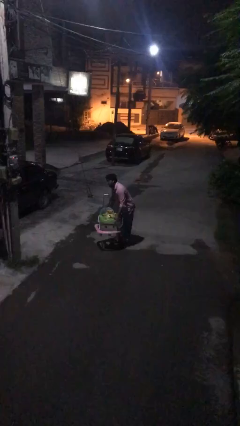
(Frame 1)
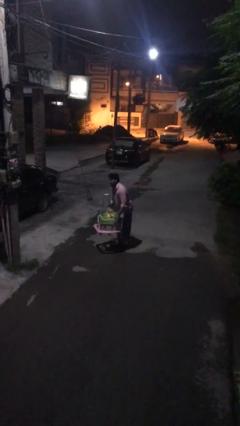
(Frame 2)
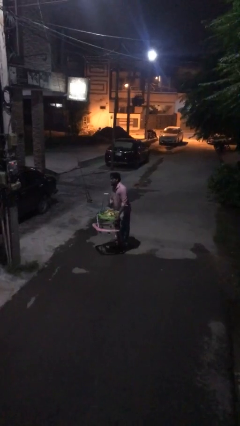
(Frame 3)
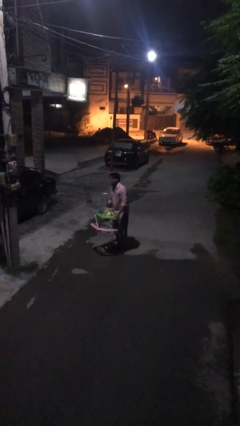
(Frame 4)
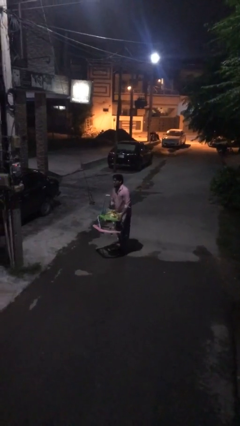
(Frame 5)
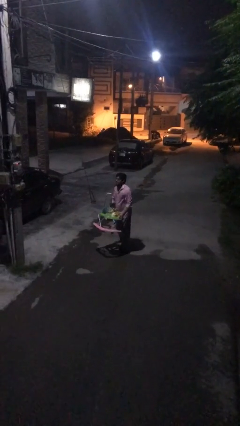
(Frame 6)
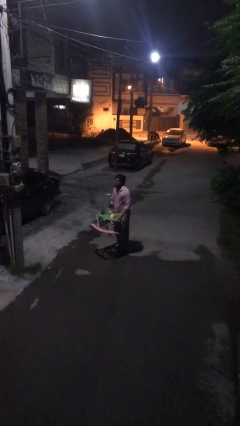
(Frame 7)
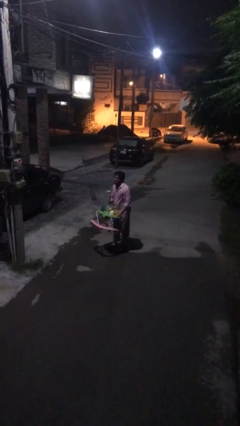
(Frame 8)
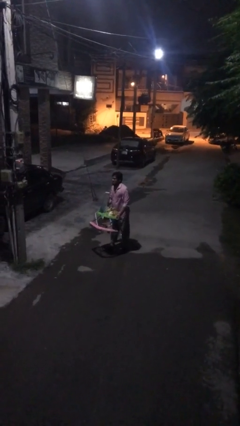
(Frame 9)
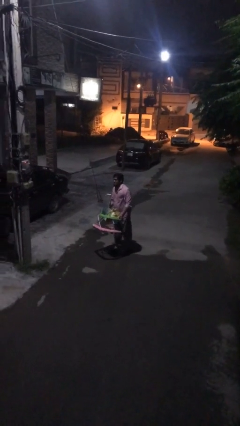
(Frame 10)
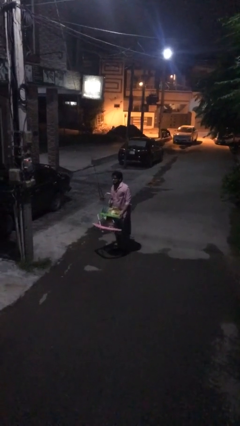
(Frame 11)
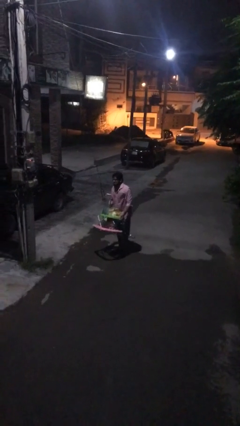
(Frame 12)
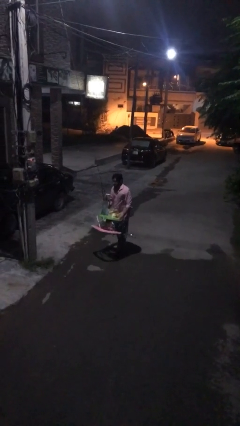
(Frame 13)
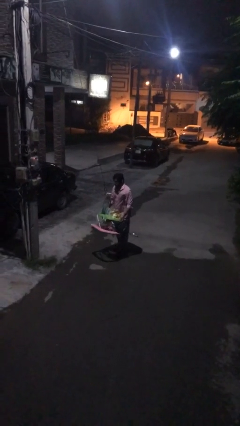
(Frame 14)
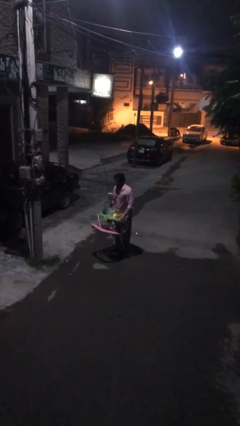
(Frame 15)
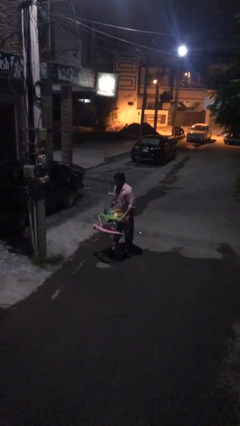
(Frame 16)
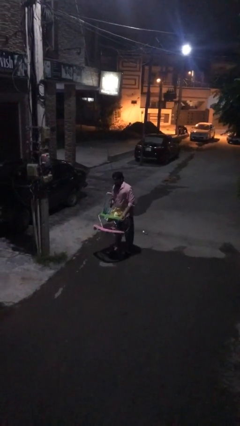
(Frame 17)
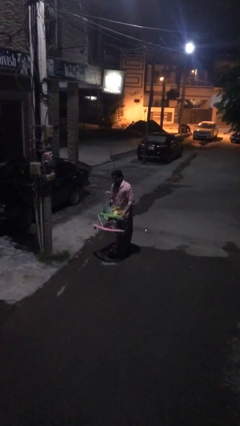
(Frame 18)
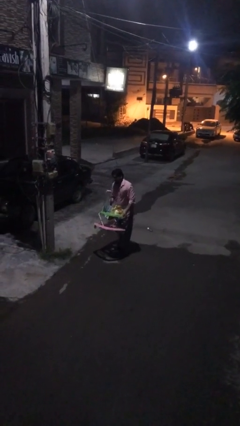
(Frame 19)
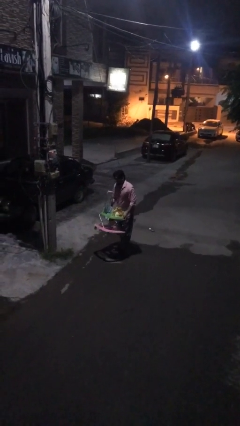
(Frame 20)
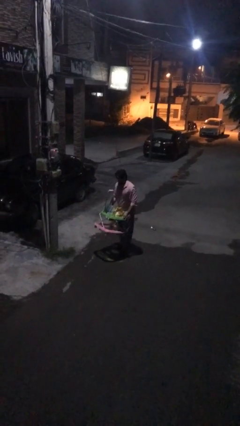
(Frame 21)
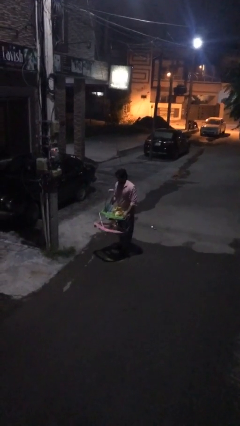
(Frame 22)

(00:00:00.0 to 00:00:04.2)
person carries heavy object

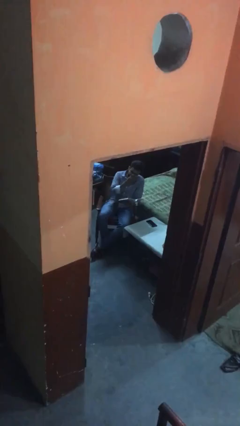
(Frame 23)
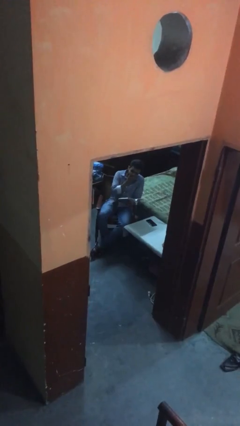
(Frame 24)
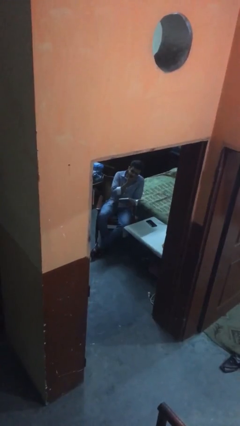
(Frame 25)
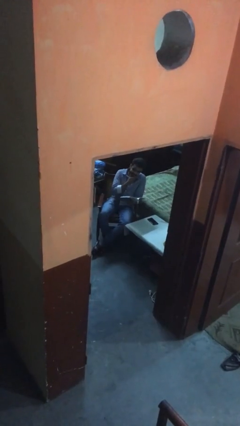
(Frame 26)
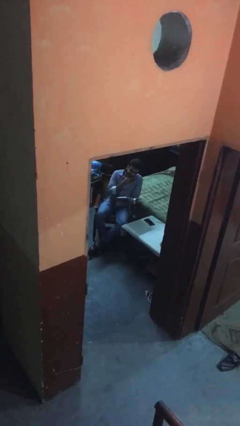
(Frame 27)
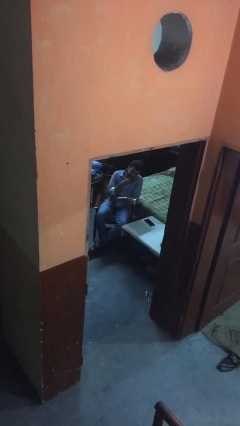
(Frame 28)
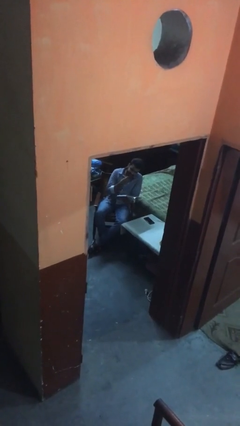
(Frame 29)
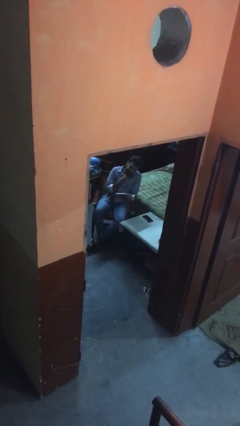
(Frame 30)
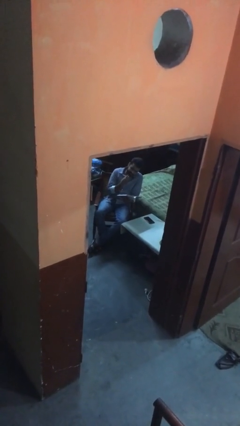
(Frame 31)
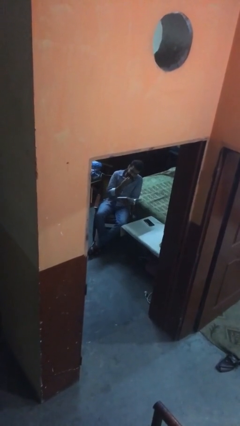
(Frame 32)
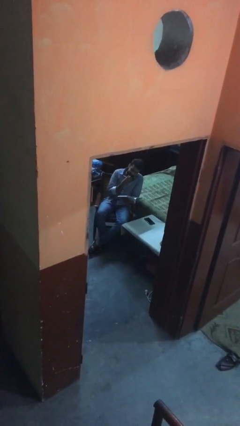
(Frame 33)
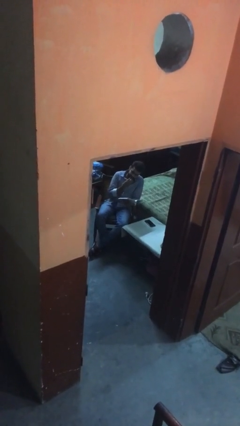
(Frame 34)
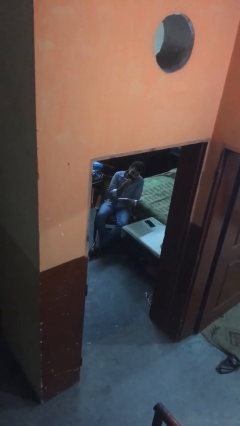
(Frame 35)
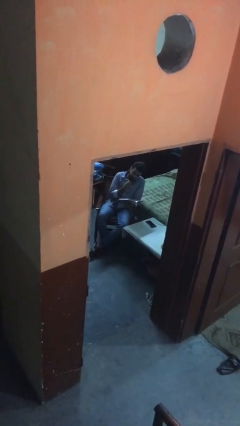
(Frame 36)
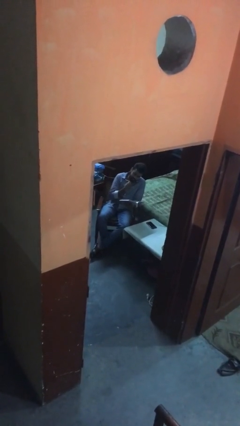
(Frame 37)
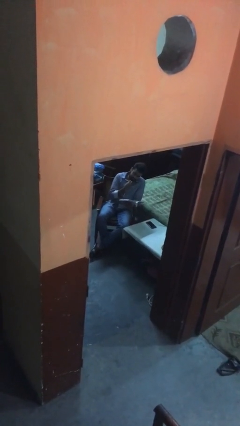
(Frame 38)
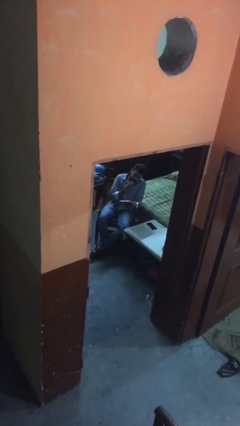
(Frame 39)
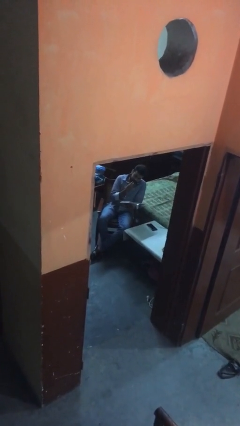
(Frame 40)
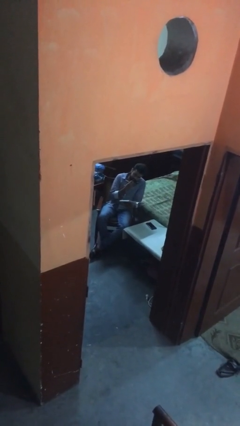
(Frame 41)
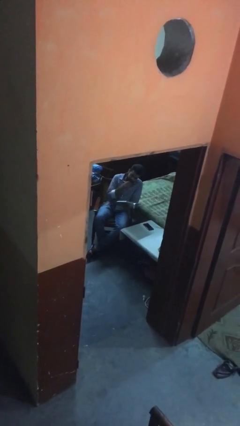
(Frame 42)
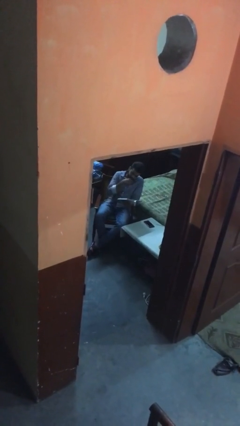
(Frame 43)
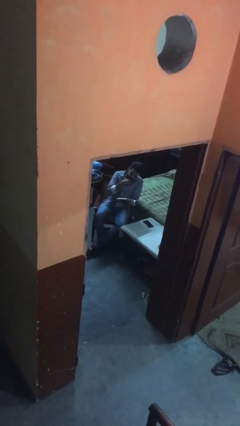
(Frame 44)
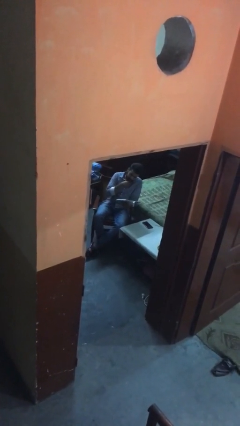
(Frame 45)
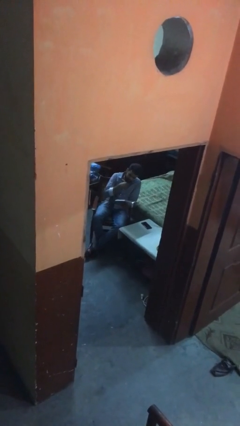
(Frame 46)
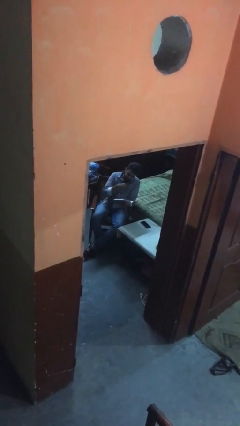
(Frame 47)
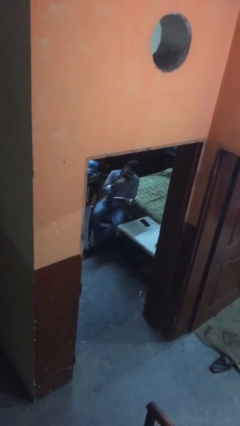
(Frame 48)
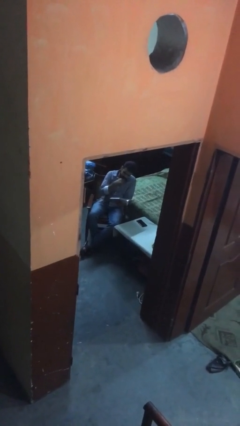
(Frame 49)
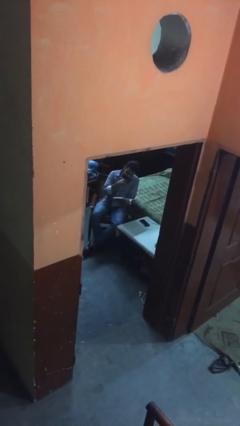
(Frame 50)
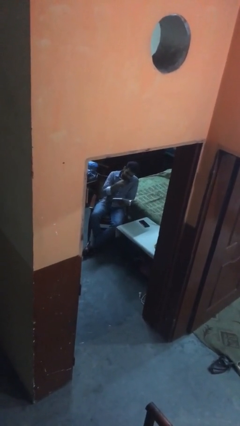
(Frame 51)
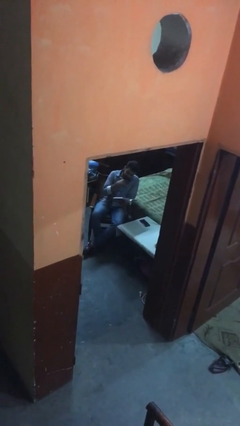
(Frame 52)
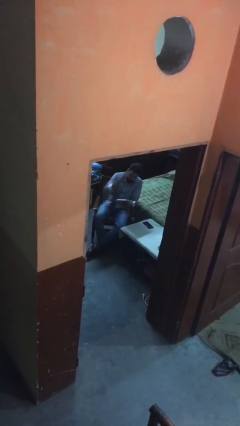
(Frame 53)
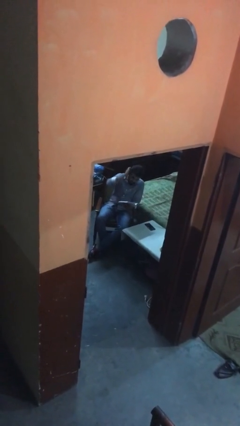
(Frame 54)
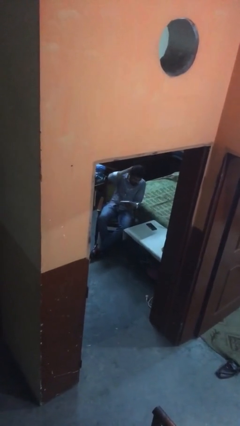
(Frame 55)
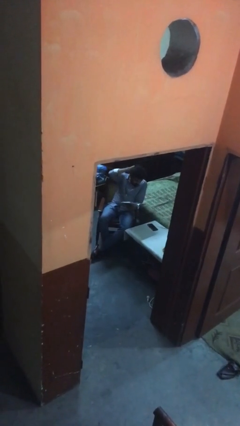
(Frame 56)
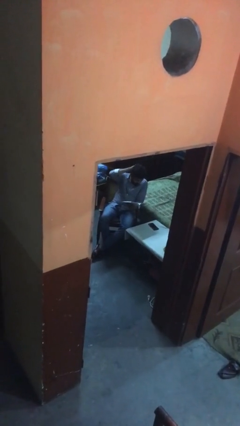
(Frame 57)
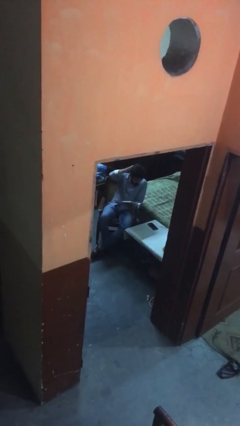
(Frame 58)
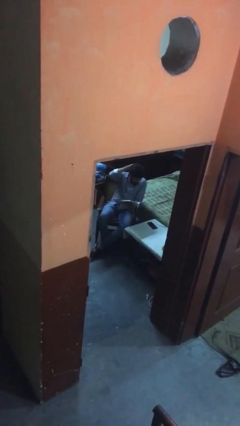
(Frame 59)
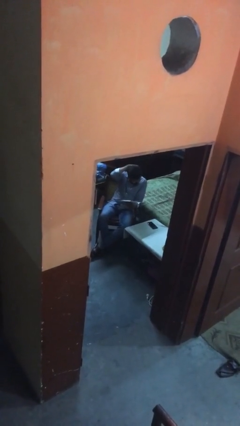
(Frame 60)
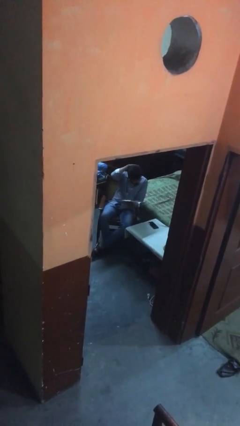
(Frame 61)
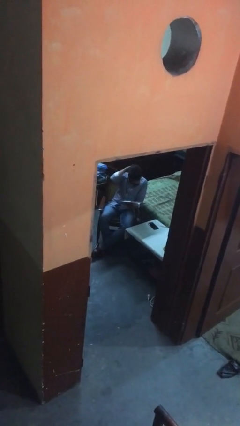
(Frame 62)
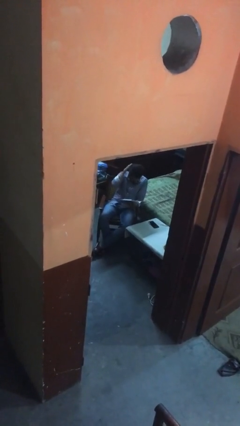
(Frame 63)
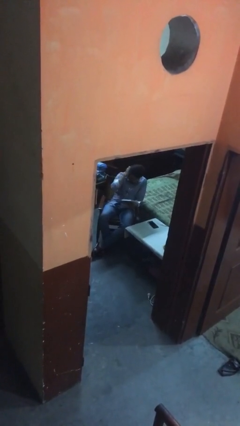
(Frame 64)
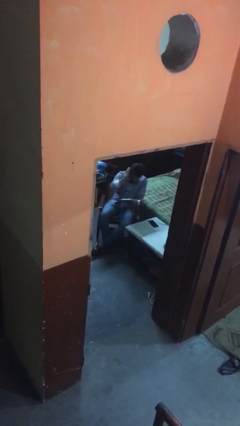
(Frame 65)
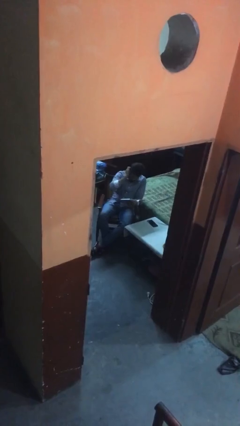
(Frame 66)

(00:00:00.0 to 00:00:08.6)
person reads document

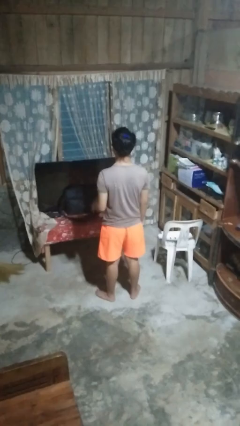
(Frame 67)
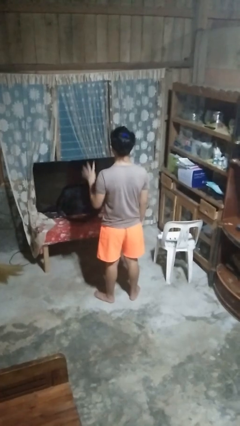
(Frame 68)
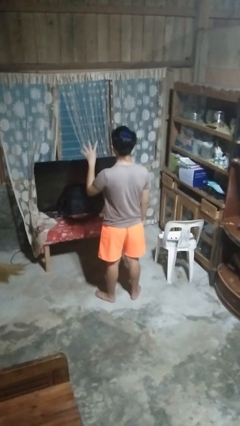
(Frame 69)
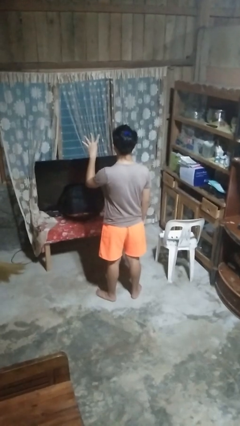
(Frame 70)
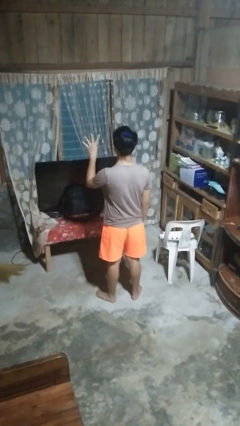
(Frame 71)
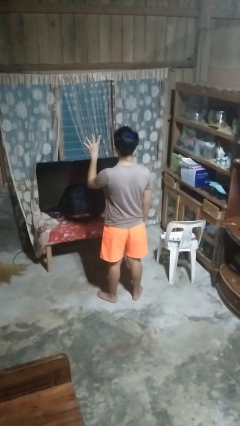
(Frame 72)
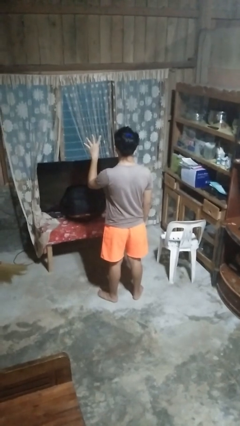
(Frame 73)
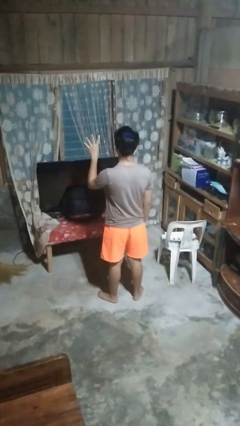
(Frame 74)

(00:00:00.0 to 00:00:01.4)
person gestures number four

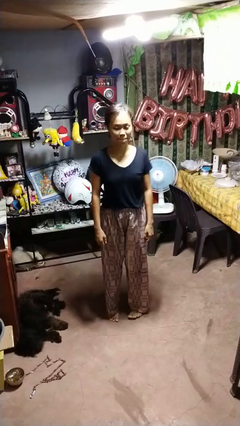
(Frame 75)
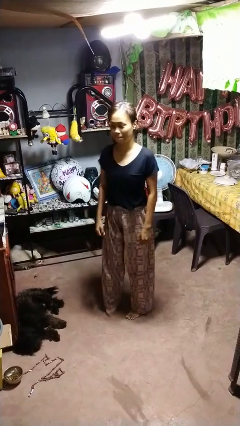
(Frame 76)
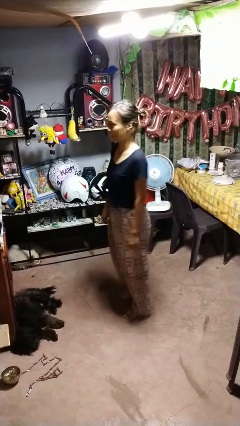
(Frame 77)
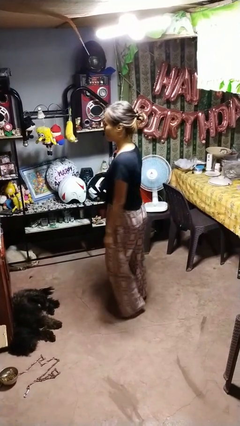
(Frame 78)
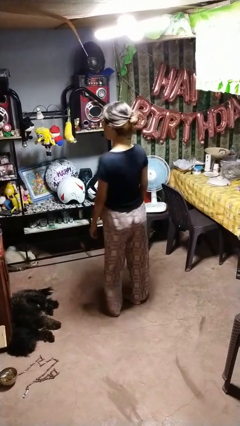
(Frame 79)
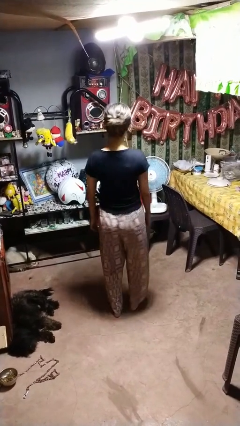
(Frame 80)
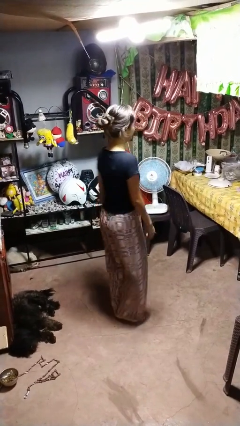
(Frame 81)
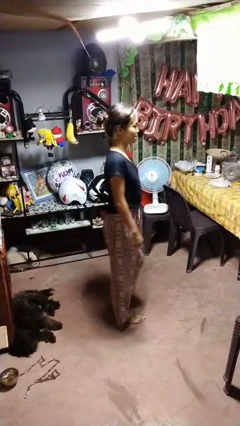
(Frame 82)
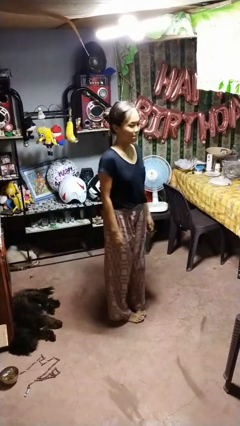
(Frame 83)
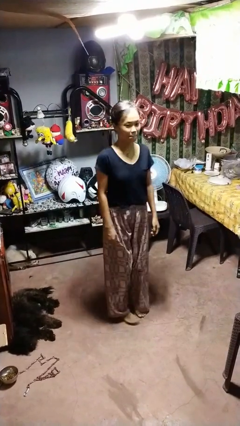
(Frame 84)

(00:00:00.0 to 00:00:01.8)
person twirls

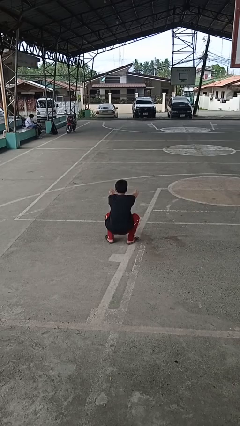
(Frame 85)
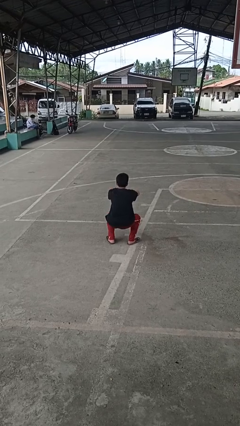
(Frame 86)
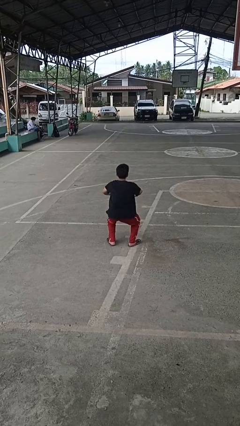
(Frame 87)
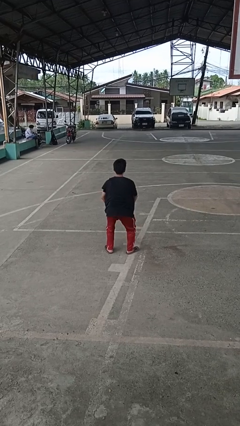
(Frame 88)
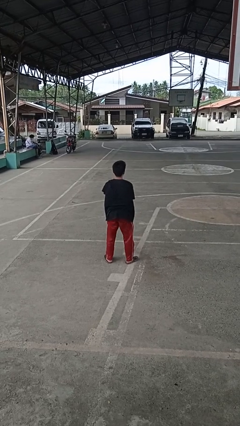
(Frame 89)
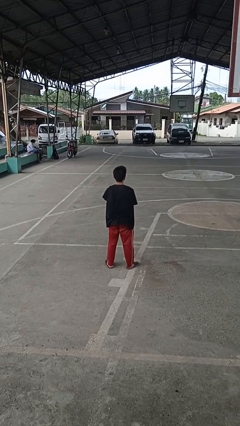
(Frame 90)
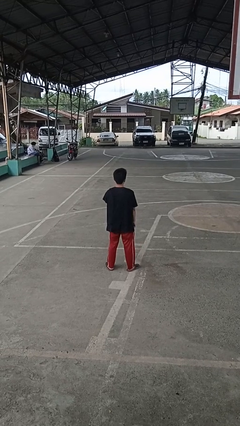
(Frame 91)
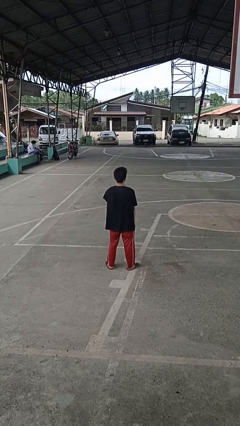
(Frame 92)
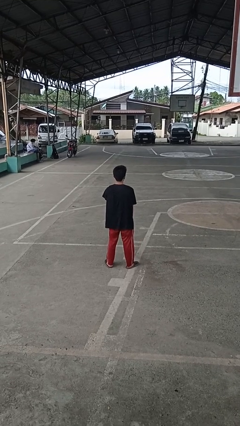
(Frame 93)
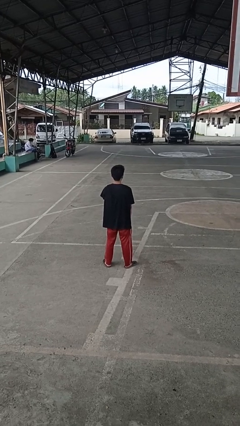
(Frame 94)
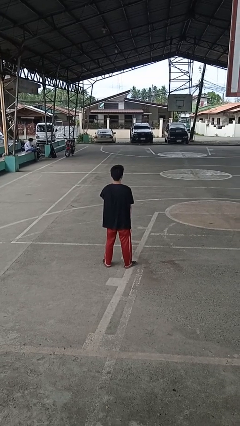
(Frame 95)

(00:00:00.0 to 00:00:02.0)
person stands up
